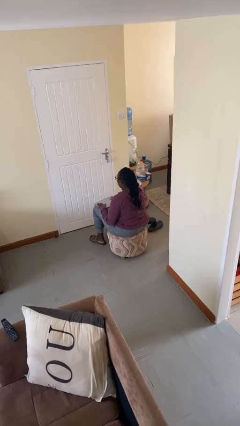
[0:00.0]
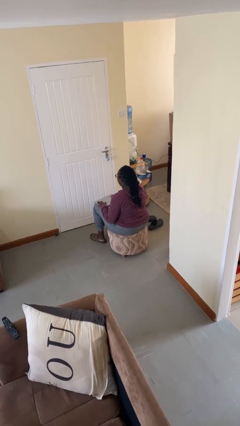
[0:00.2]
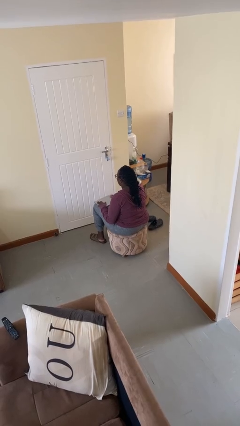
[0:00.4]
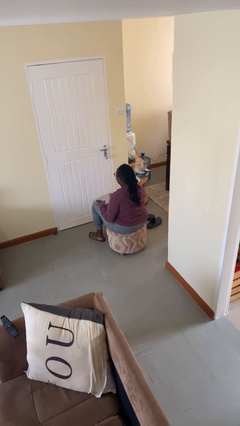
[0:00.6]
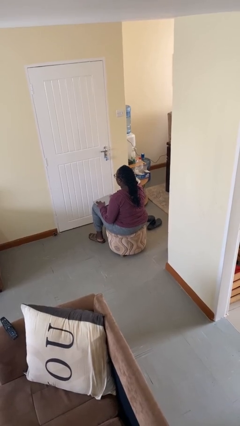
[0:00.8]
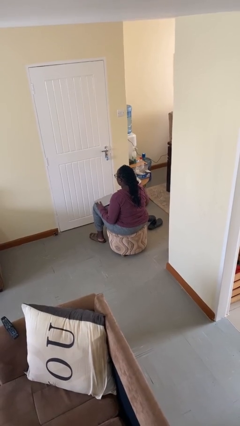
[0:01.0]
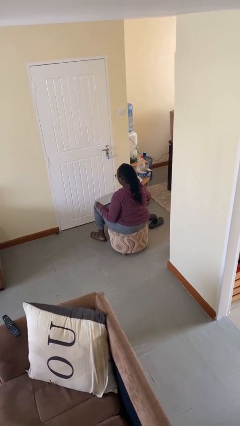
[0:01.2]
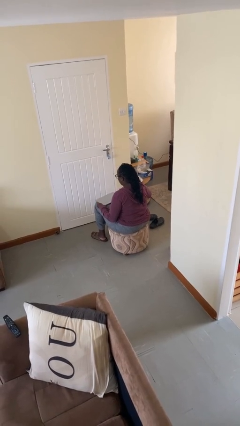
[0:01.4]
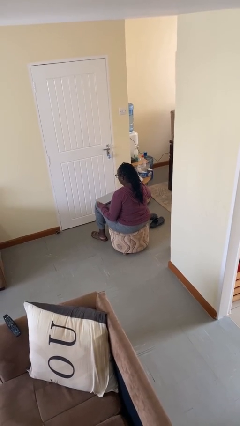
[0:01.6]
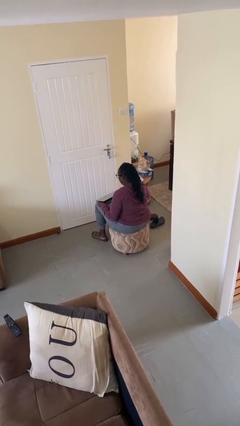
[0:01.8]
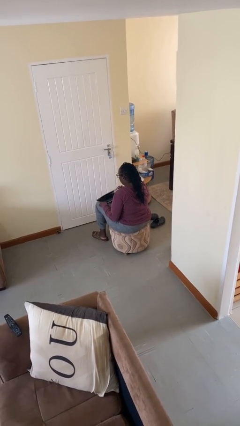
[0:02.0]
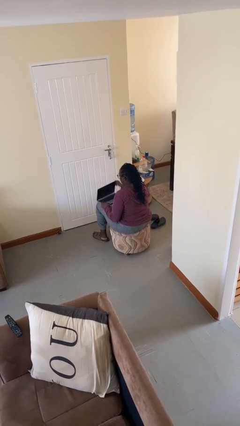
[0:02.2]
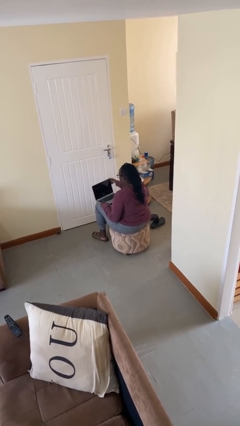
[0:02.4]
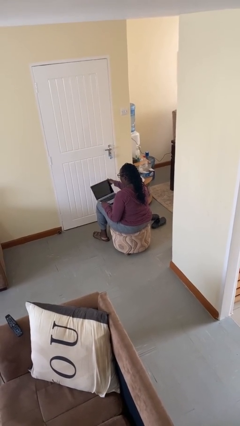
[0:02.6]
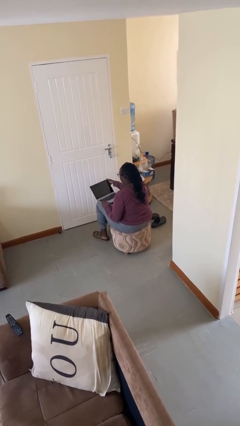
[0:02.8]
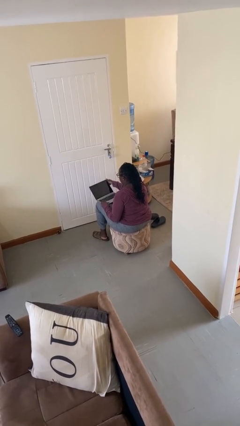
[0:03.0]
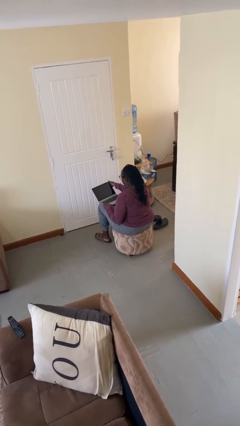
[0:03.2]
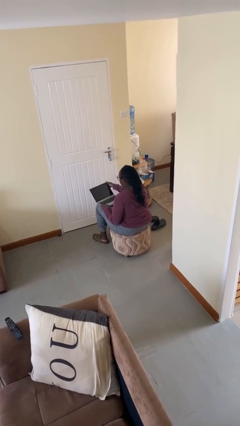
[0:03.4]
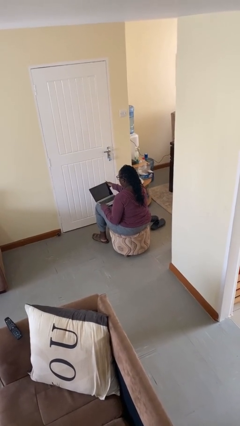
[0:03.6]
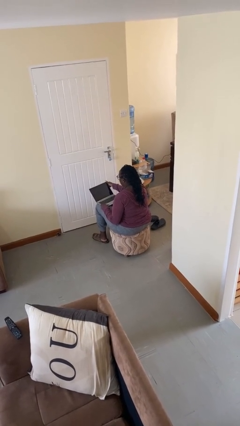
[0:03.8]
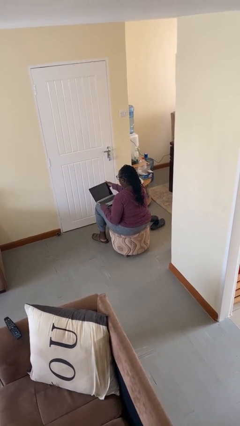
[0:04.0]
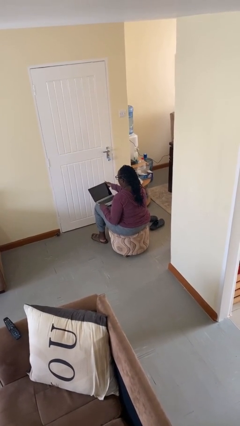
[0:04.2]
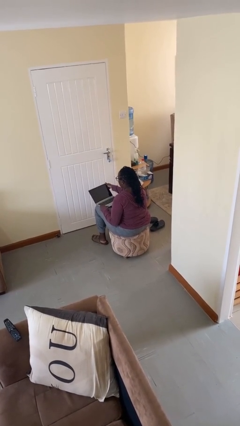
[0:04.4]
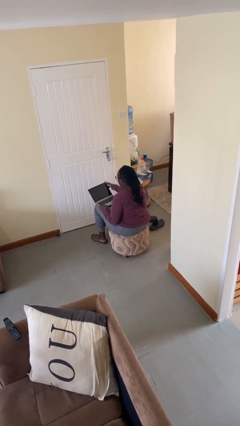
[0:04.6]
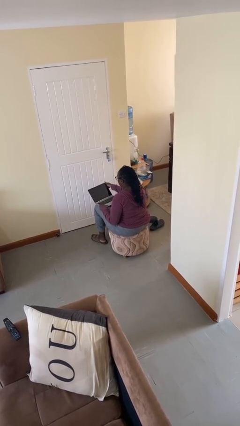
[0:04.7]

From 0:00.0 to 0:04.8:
person opens laptop

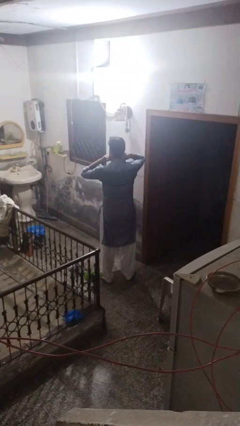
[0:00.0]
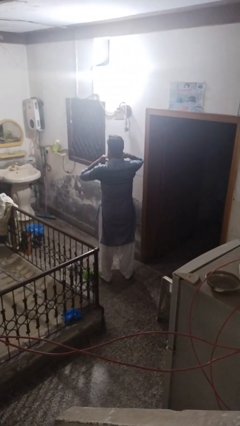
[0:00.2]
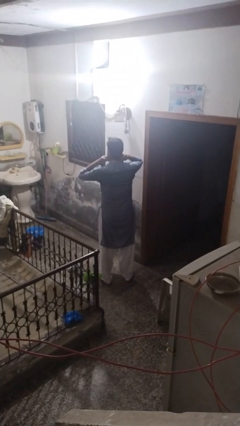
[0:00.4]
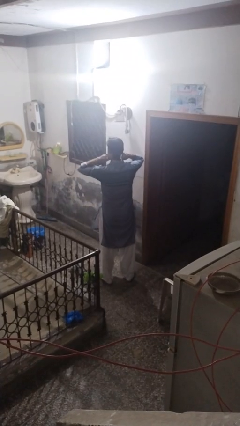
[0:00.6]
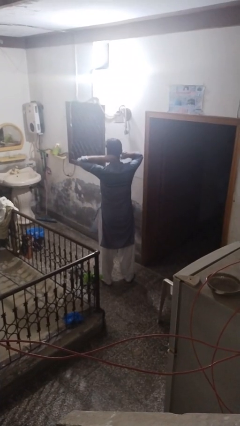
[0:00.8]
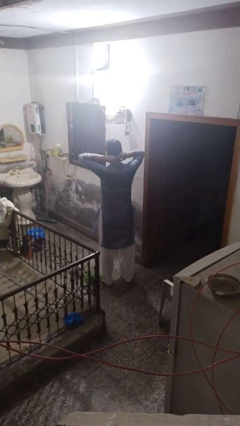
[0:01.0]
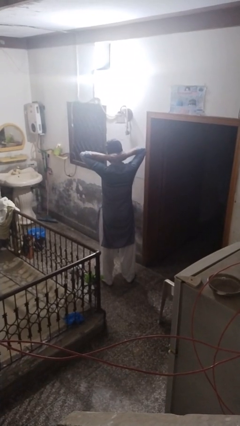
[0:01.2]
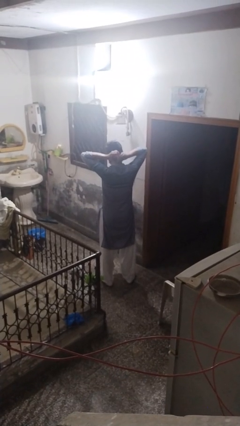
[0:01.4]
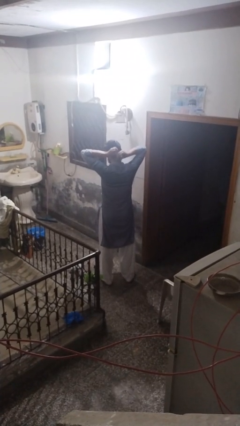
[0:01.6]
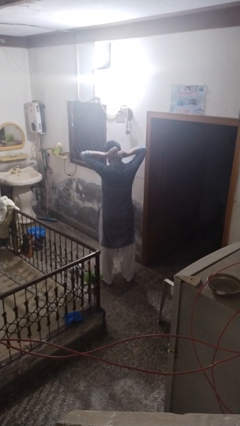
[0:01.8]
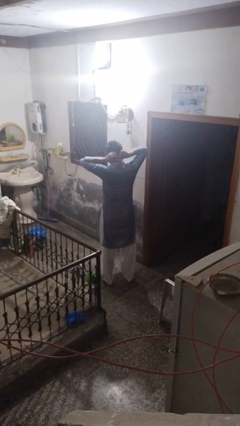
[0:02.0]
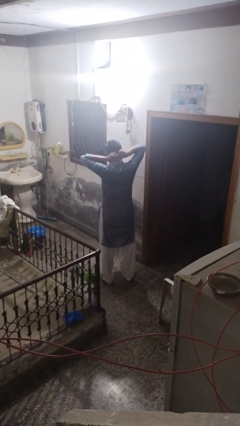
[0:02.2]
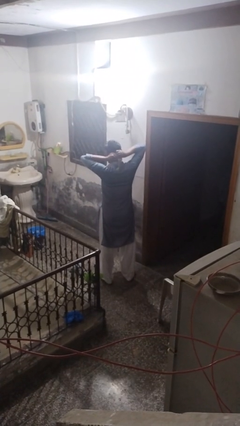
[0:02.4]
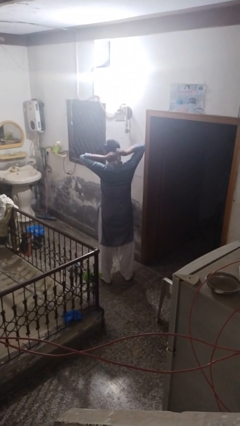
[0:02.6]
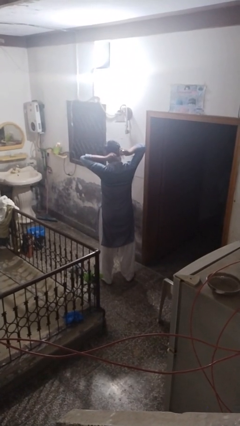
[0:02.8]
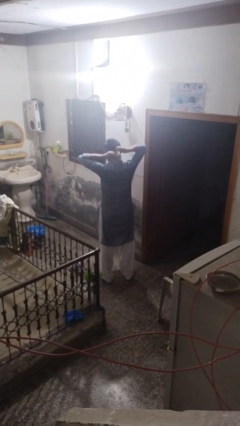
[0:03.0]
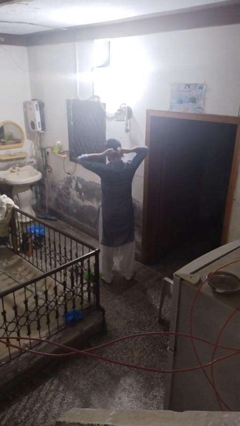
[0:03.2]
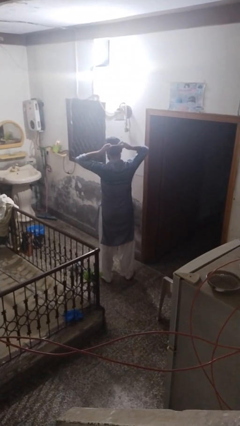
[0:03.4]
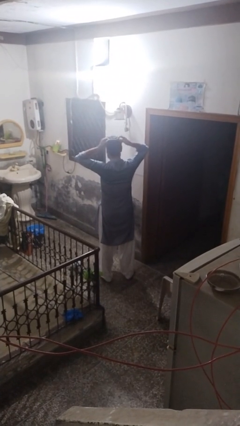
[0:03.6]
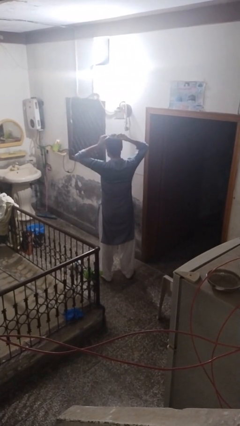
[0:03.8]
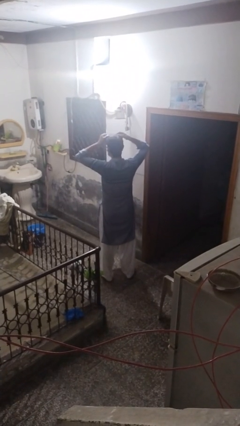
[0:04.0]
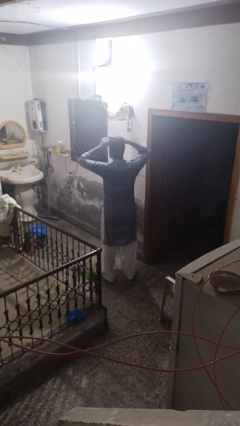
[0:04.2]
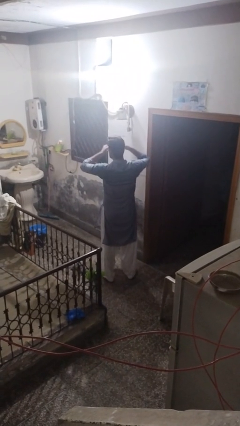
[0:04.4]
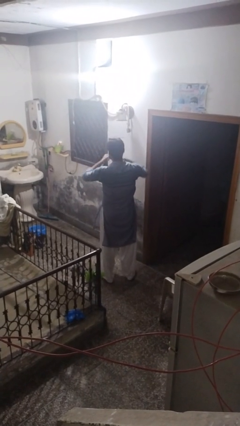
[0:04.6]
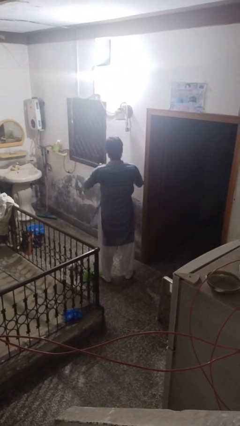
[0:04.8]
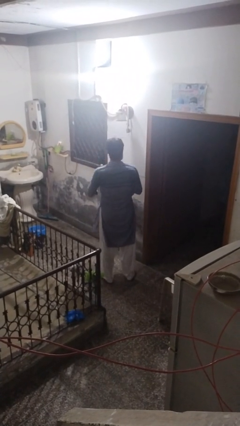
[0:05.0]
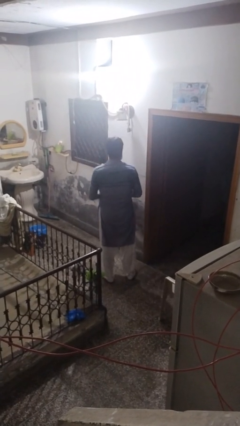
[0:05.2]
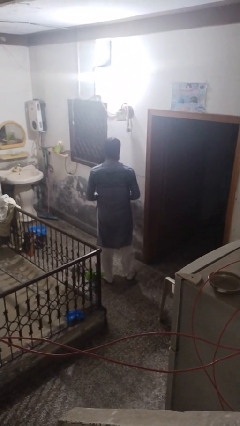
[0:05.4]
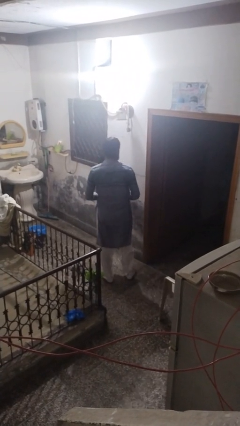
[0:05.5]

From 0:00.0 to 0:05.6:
person takes off necklace

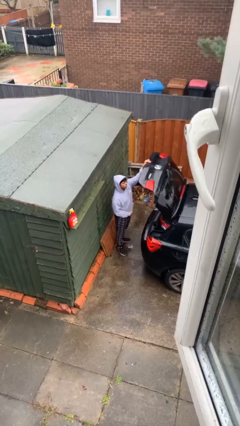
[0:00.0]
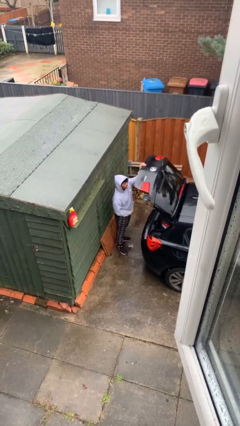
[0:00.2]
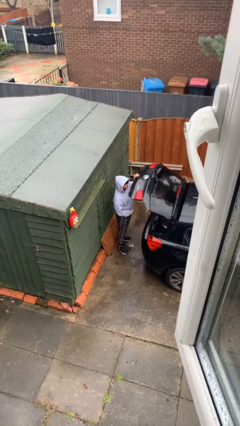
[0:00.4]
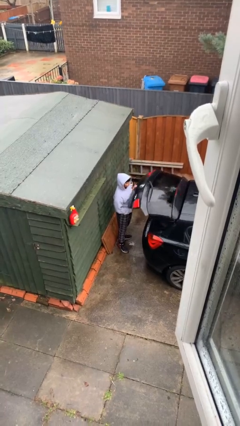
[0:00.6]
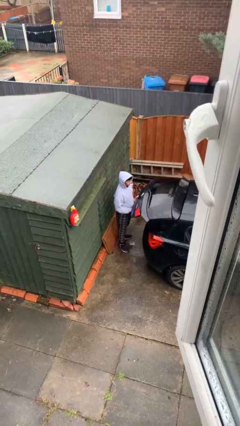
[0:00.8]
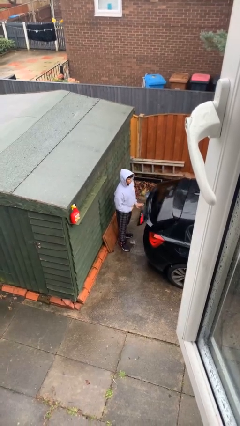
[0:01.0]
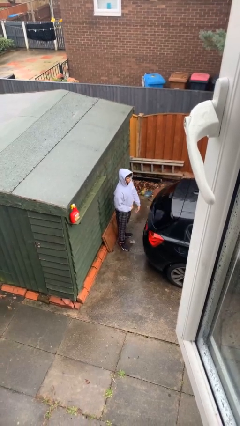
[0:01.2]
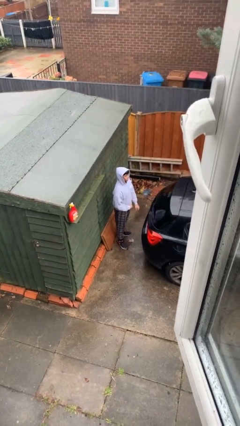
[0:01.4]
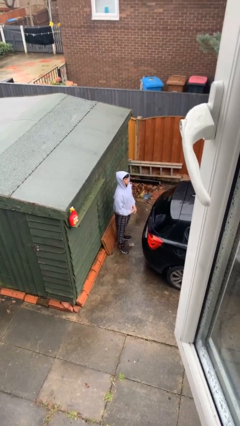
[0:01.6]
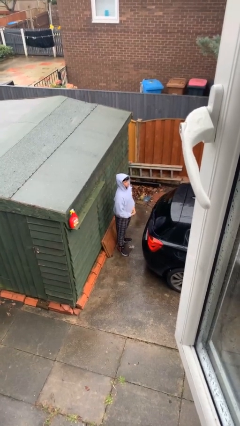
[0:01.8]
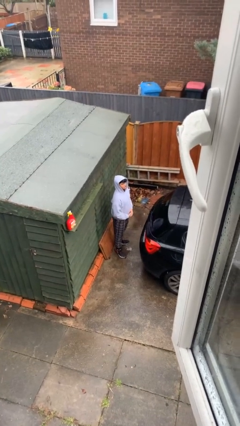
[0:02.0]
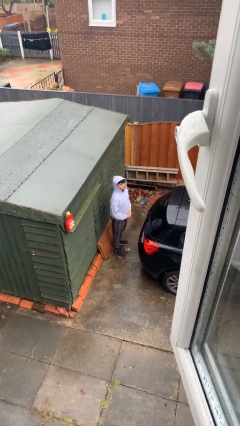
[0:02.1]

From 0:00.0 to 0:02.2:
person closes car trunk

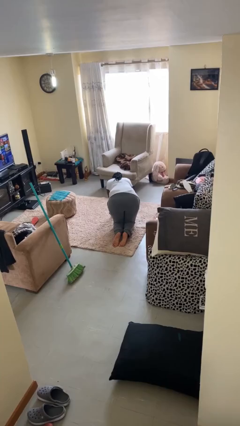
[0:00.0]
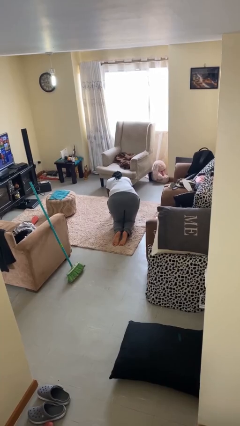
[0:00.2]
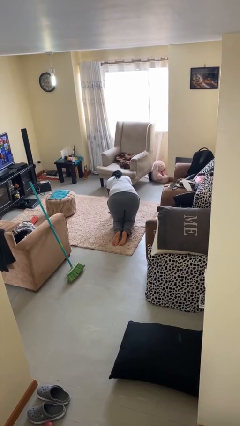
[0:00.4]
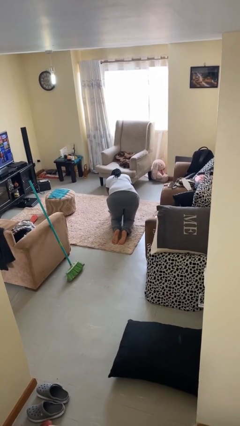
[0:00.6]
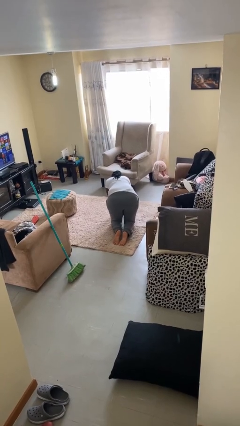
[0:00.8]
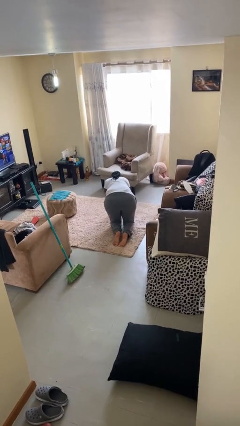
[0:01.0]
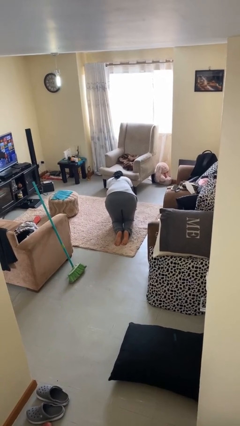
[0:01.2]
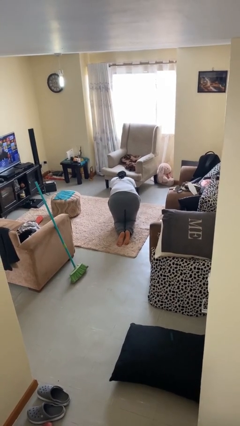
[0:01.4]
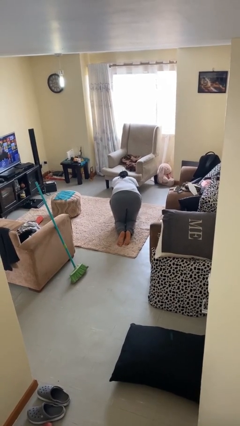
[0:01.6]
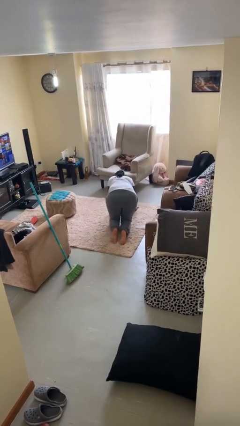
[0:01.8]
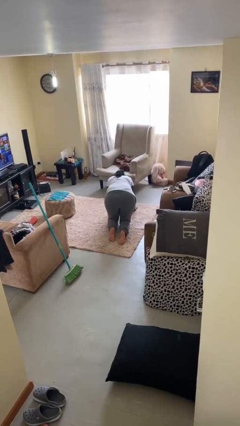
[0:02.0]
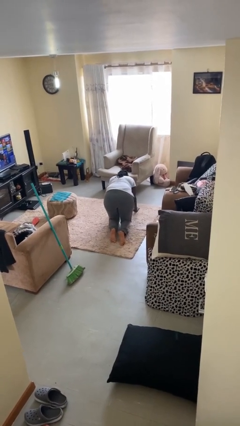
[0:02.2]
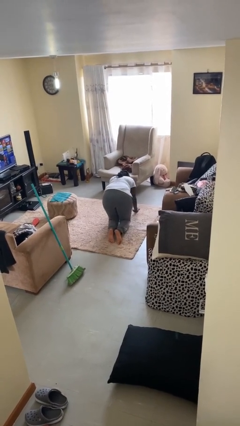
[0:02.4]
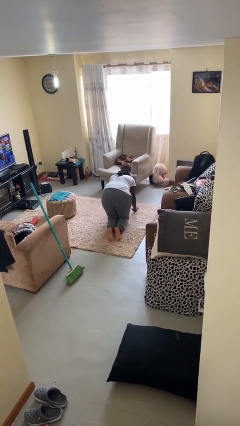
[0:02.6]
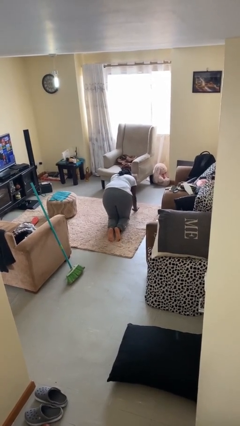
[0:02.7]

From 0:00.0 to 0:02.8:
person crawls

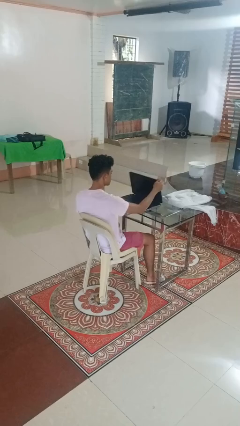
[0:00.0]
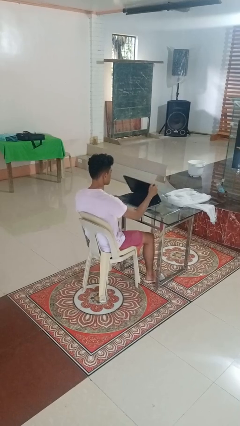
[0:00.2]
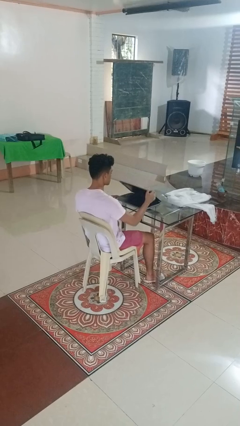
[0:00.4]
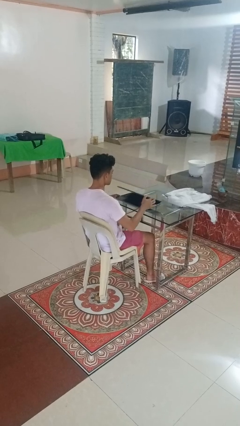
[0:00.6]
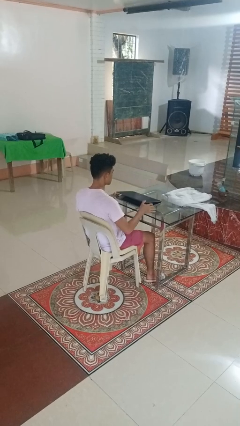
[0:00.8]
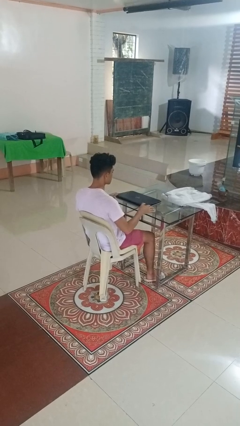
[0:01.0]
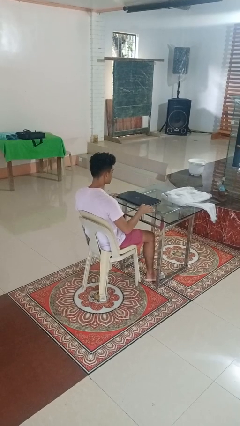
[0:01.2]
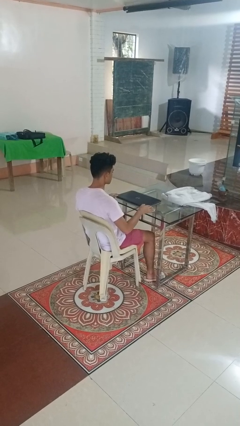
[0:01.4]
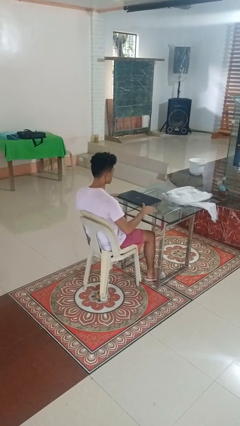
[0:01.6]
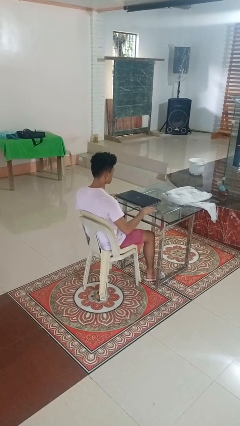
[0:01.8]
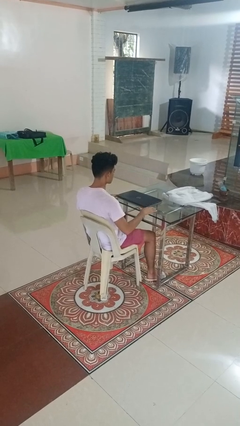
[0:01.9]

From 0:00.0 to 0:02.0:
person closes laptop
